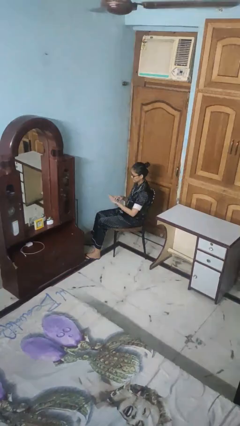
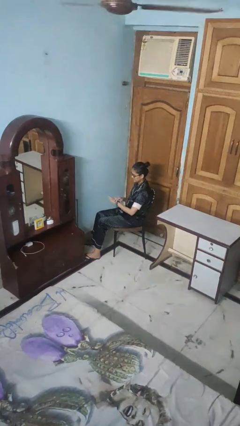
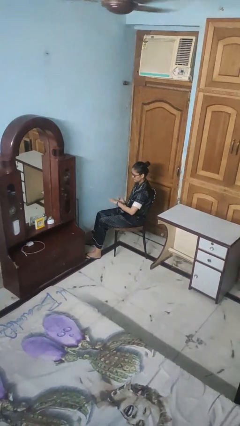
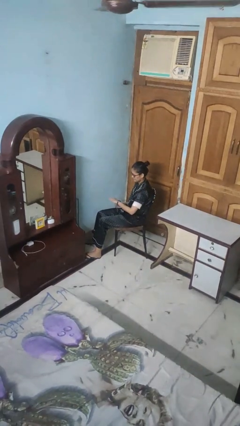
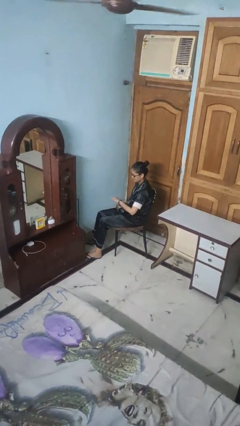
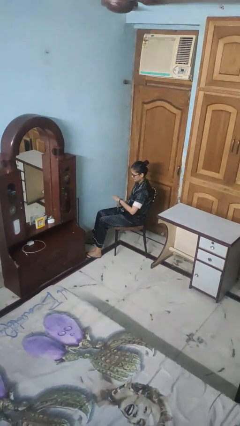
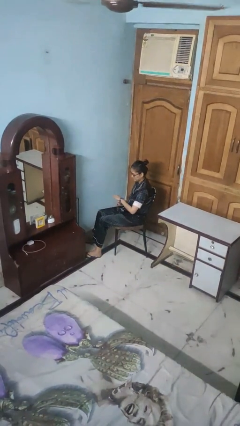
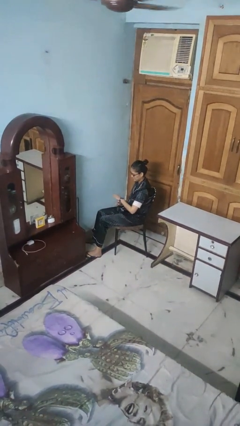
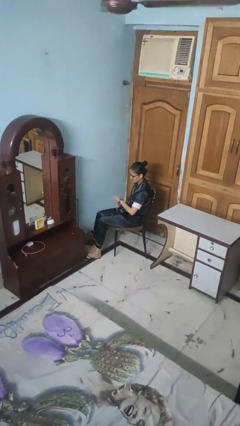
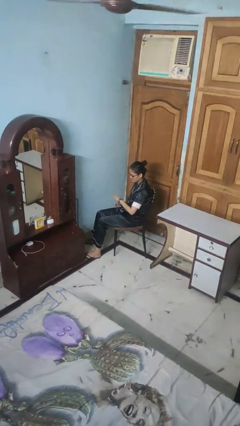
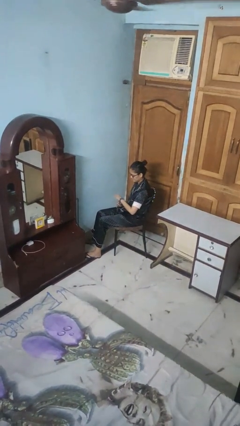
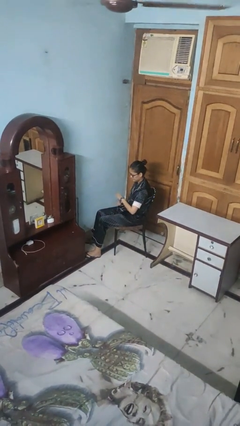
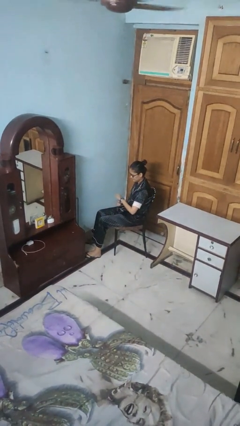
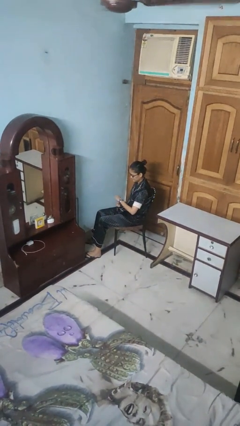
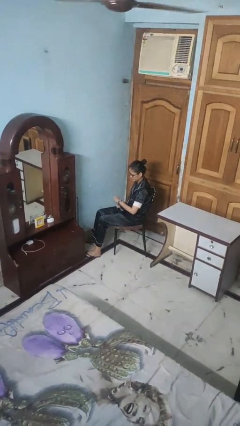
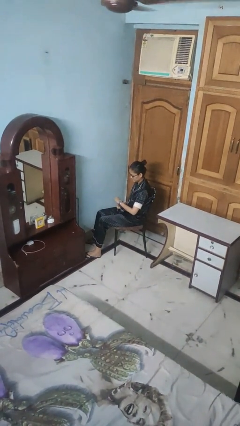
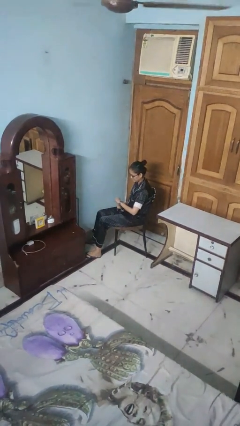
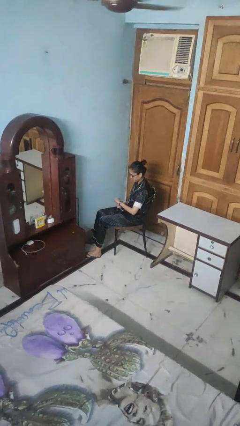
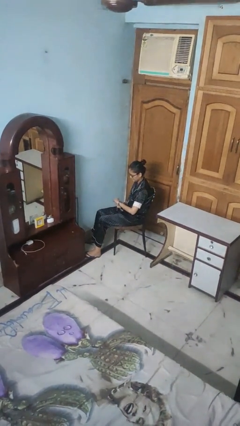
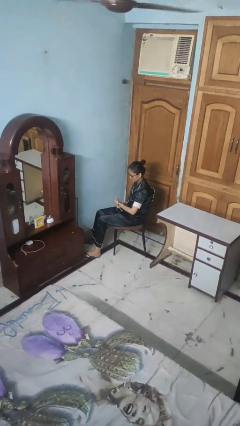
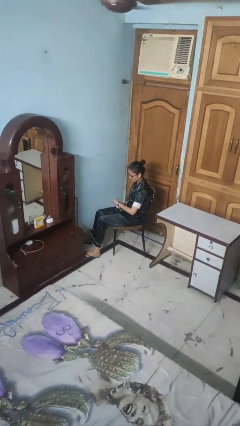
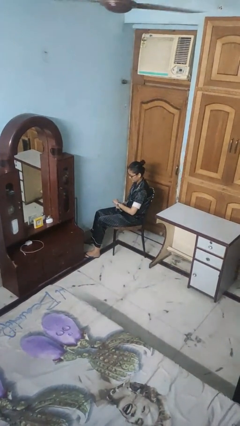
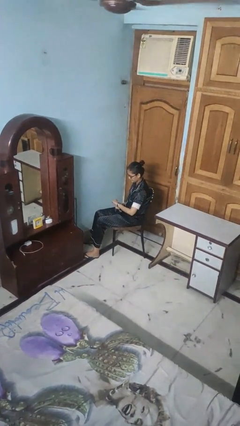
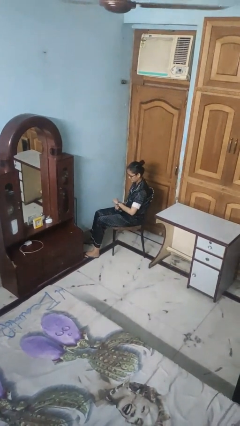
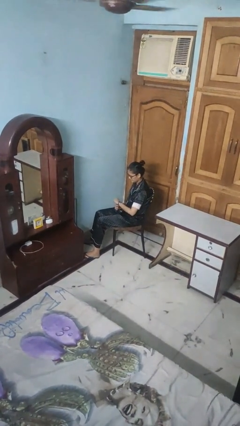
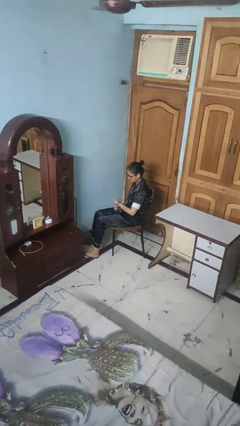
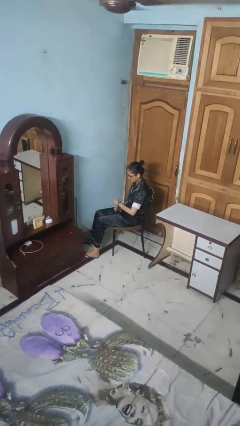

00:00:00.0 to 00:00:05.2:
person puts on wristwatch

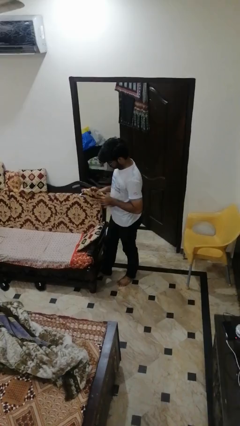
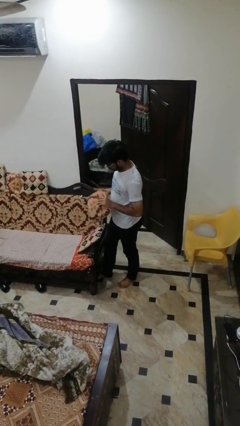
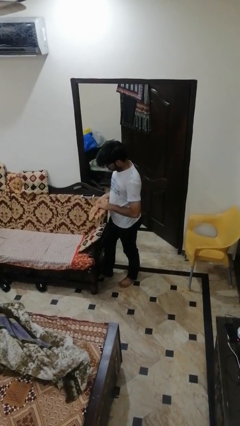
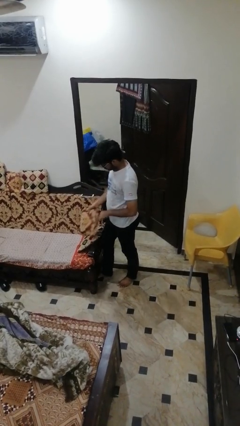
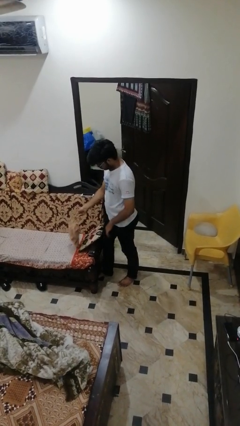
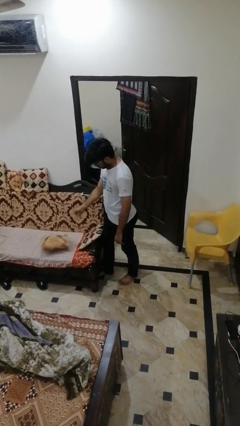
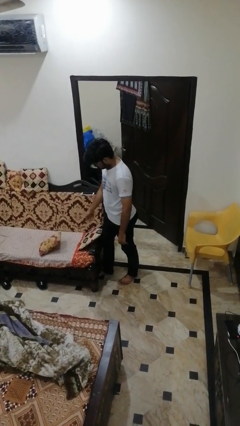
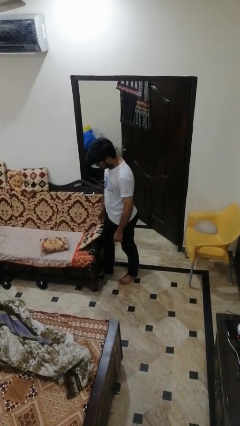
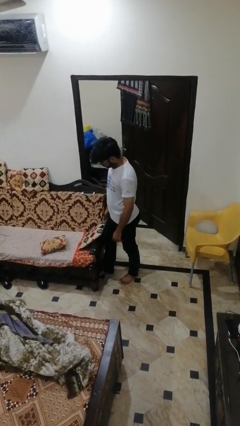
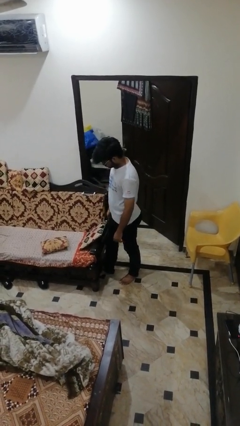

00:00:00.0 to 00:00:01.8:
person puts down object on couch

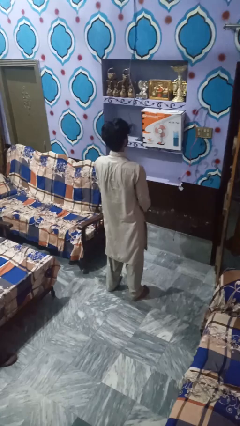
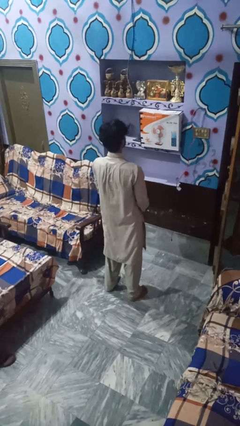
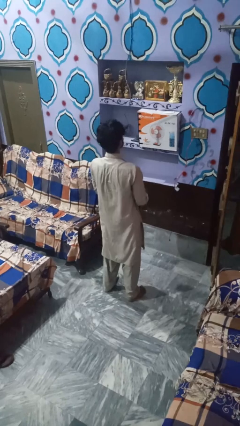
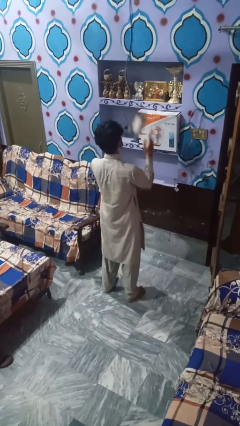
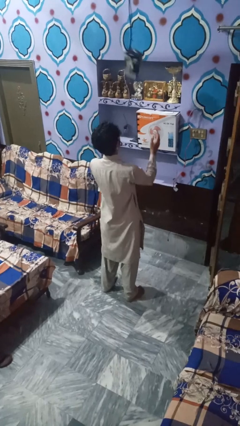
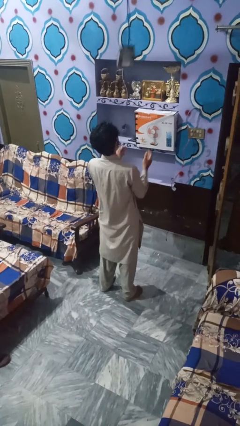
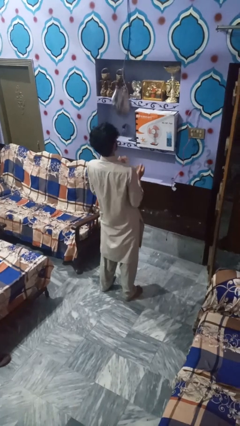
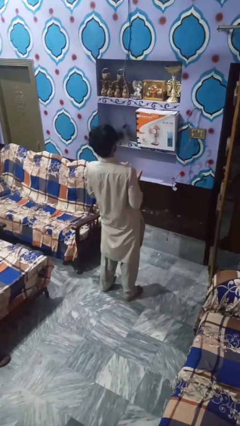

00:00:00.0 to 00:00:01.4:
person drops object

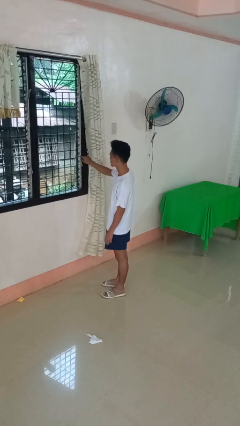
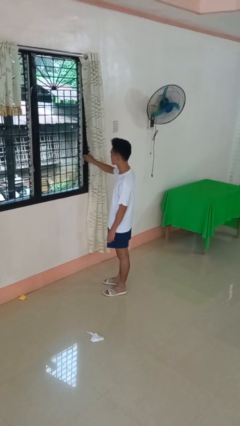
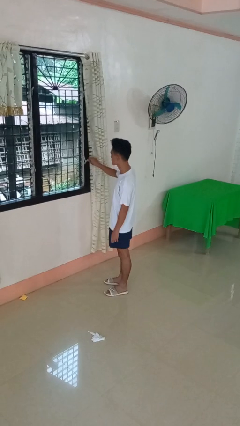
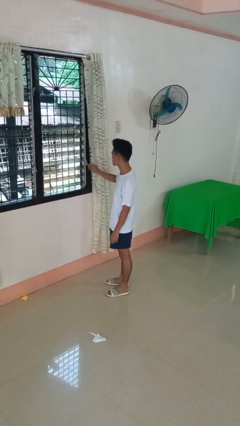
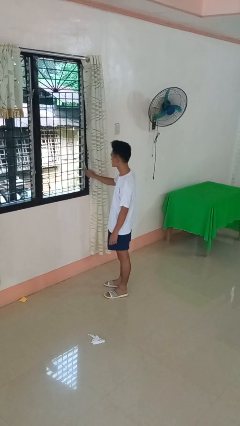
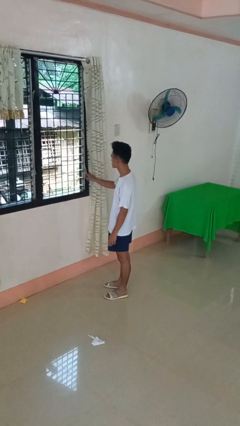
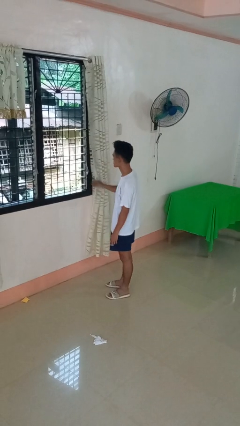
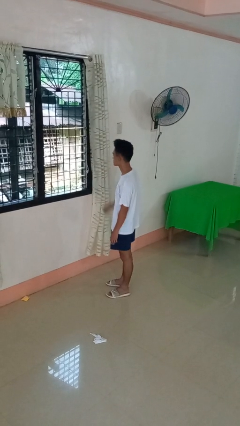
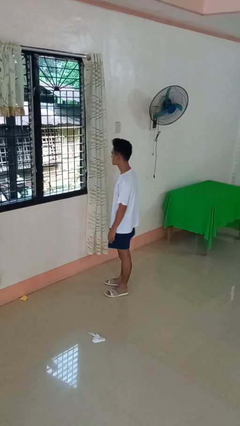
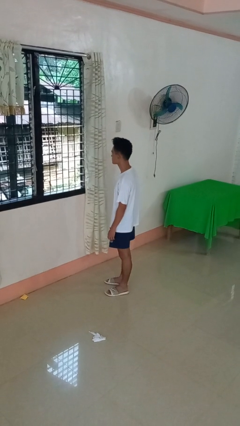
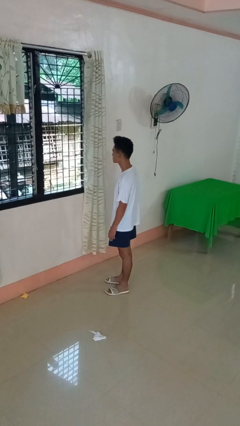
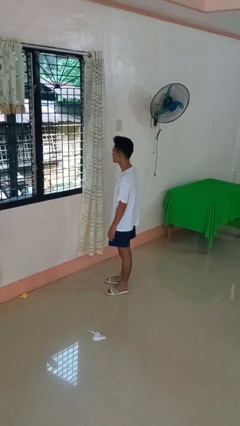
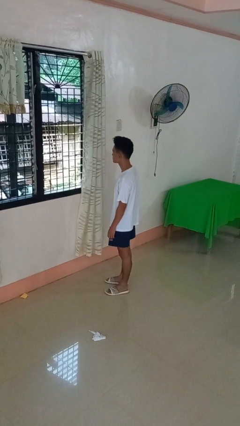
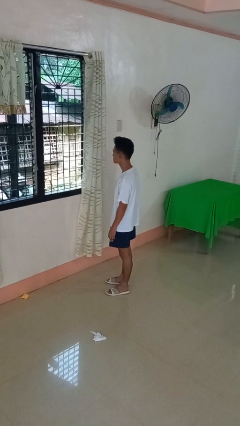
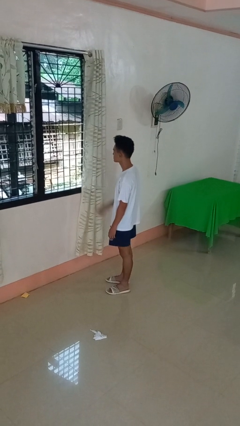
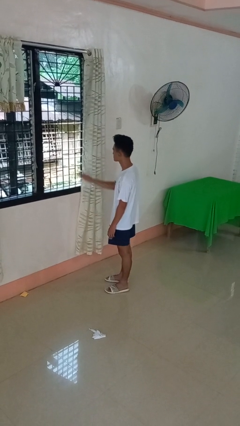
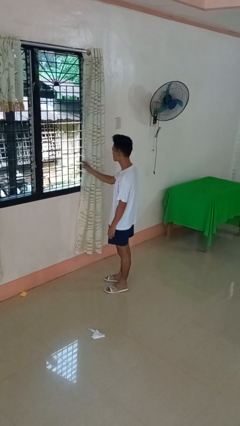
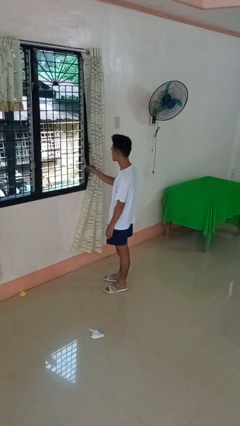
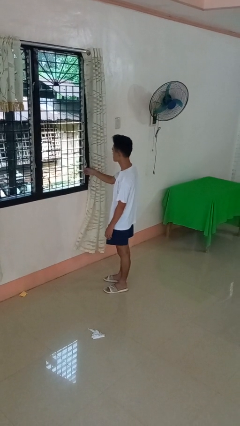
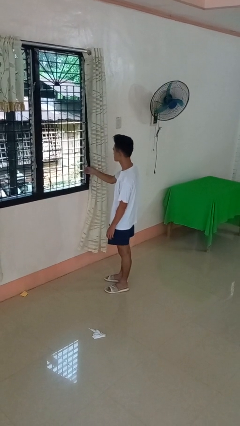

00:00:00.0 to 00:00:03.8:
person opens home window

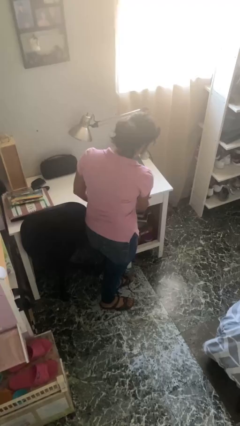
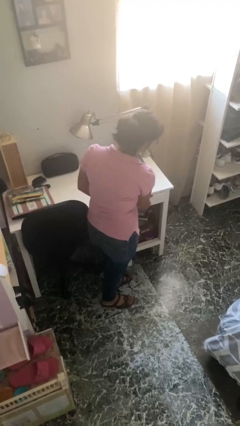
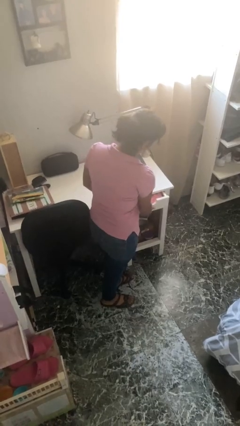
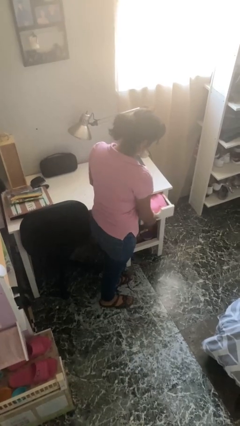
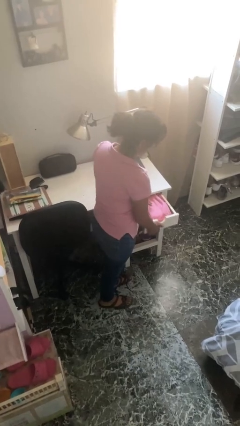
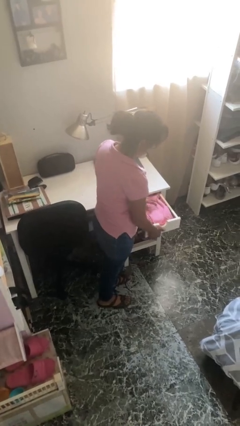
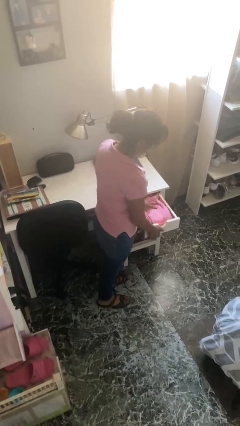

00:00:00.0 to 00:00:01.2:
person opens dresser drawer

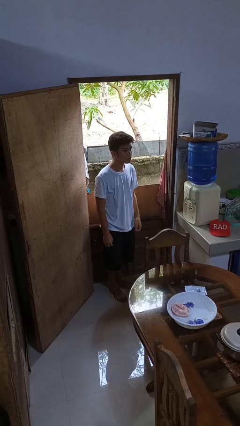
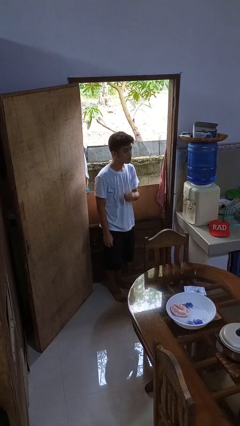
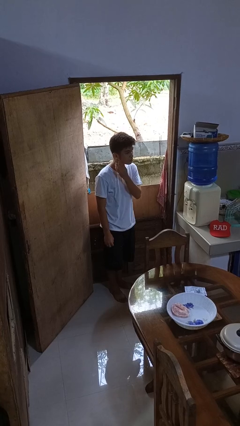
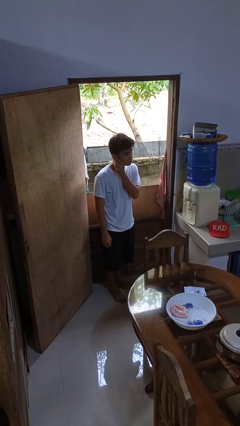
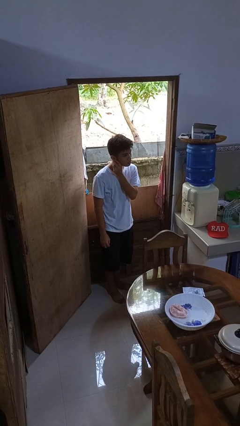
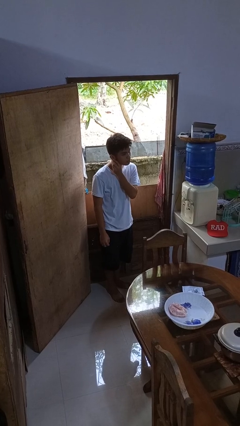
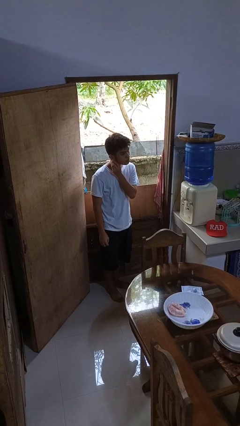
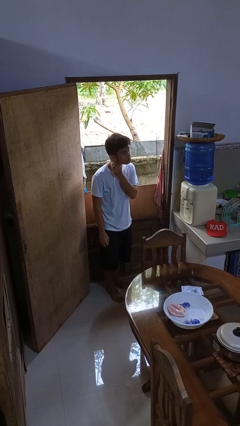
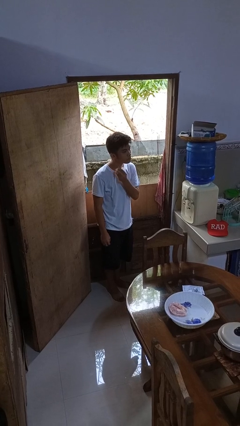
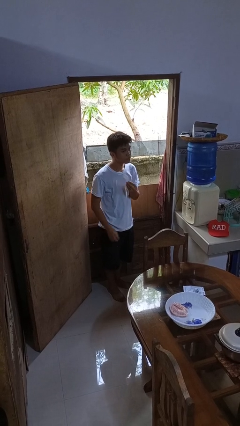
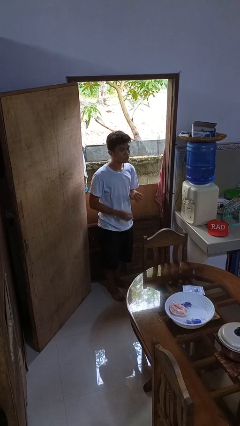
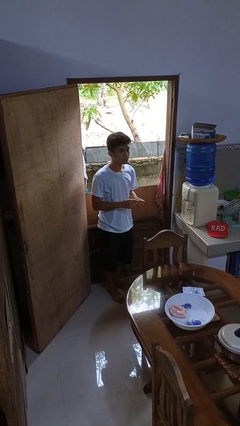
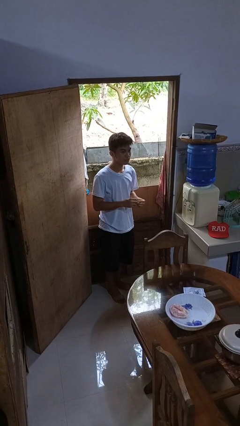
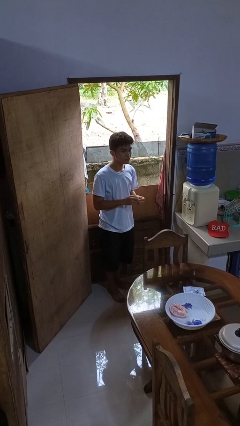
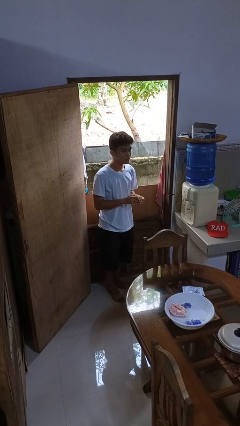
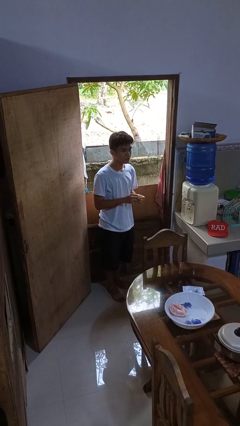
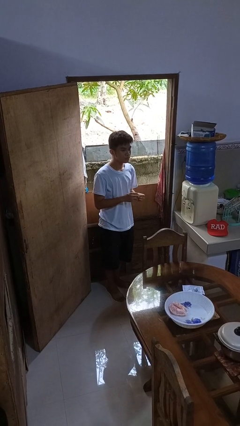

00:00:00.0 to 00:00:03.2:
person takes off earrings

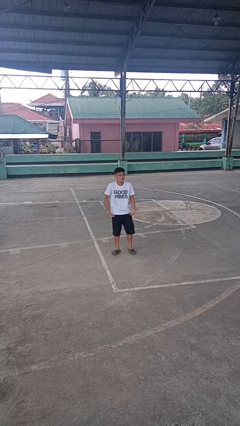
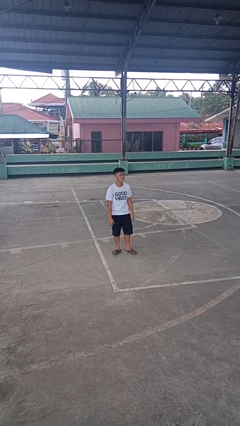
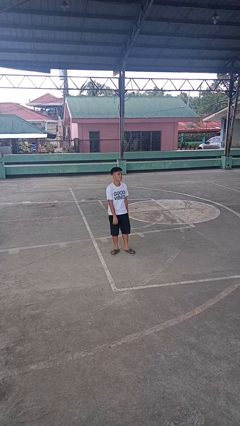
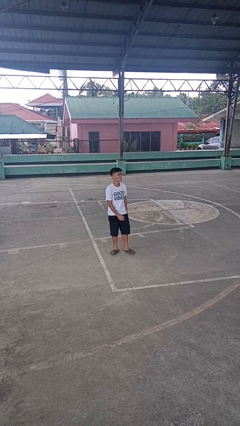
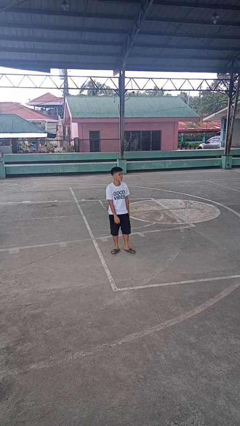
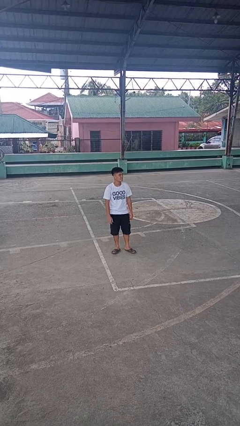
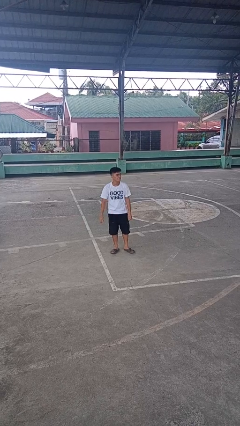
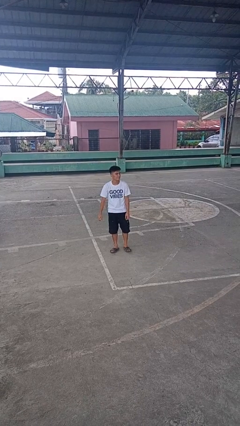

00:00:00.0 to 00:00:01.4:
person shrugs
